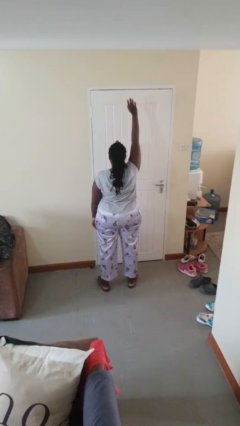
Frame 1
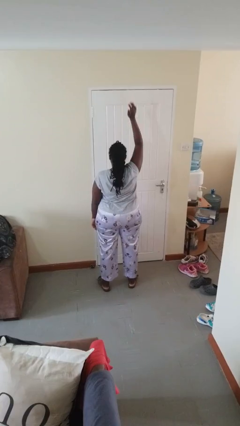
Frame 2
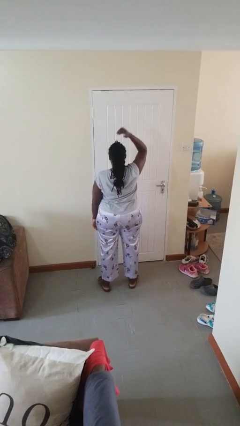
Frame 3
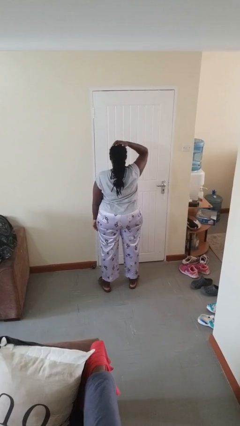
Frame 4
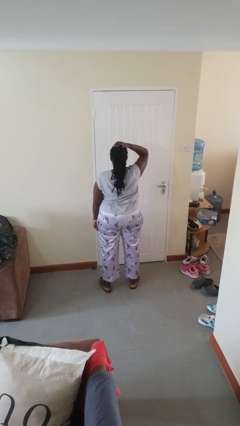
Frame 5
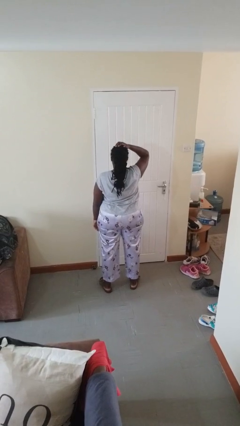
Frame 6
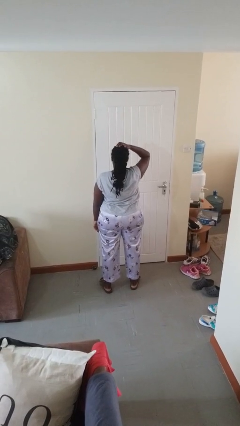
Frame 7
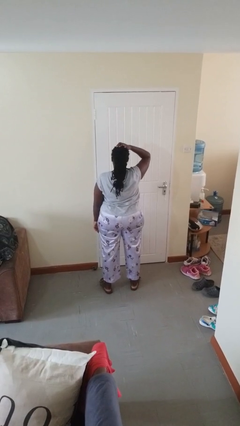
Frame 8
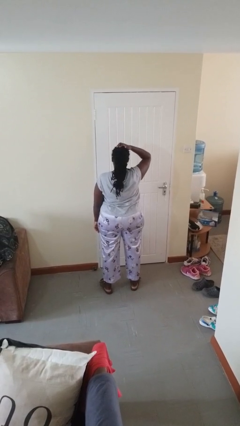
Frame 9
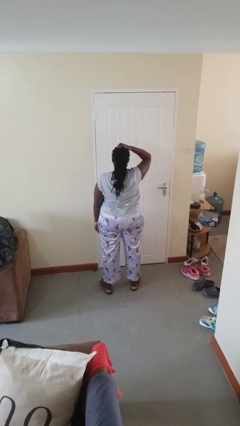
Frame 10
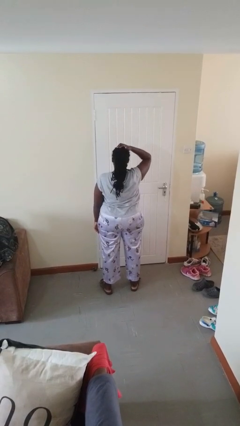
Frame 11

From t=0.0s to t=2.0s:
person gestures lower hand

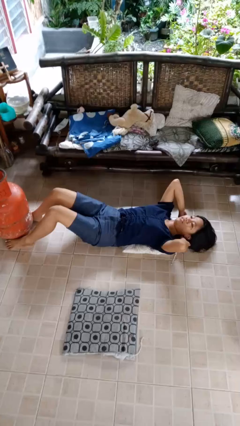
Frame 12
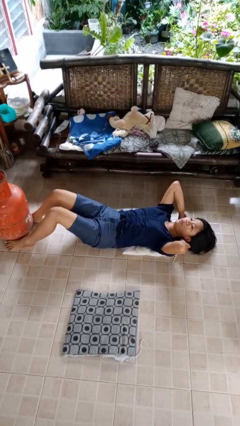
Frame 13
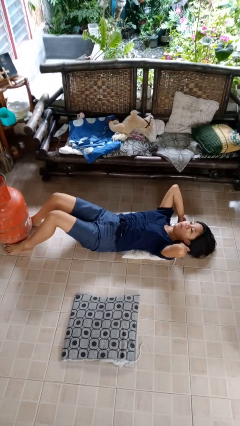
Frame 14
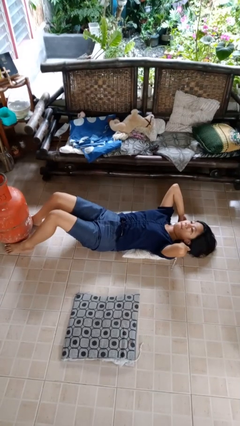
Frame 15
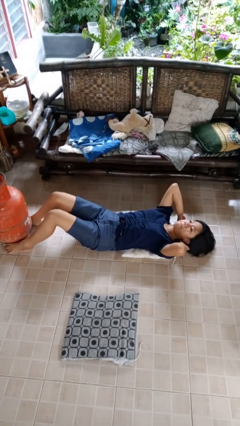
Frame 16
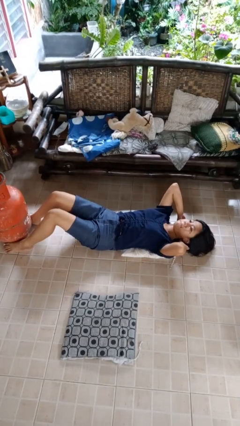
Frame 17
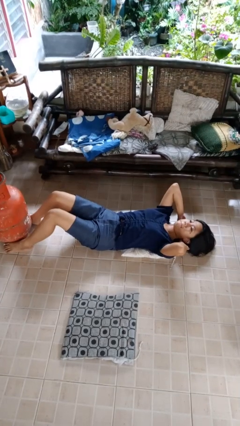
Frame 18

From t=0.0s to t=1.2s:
person exercises with situp

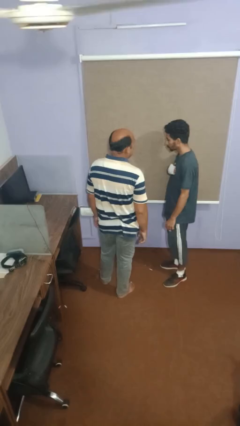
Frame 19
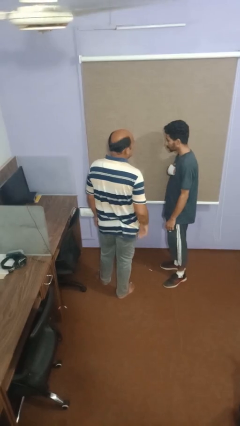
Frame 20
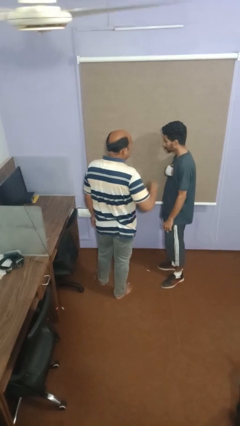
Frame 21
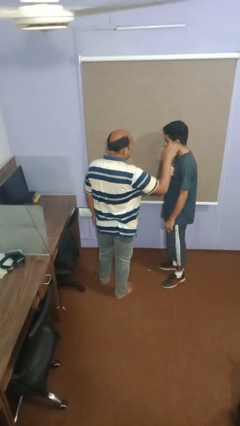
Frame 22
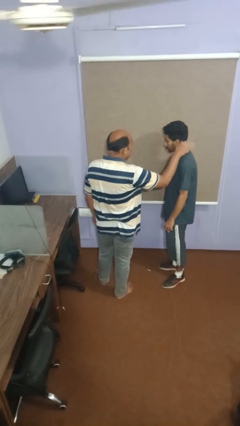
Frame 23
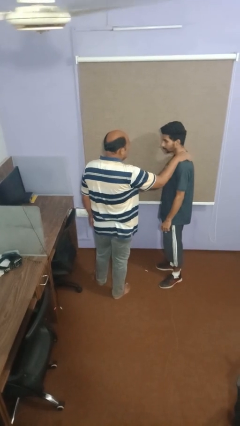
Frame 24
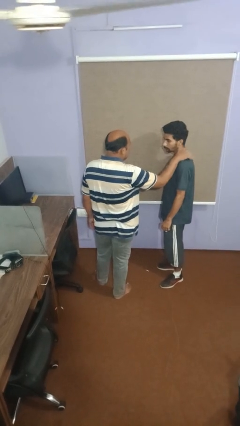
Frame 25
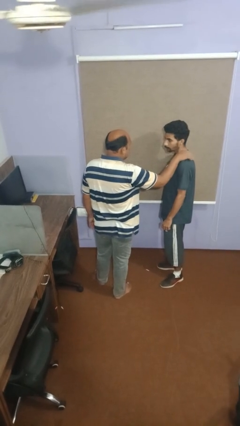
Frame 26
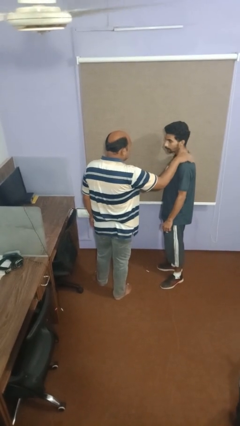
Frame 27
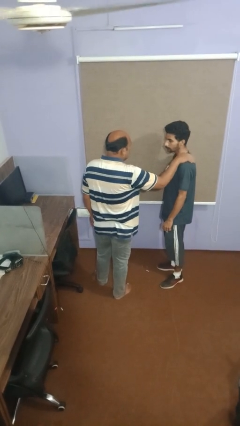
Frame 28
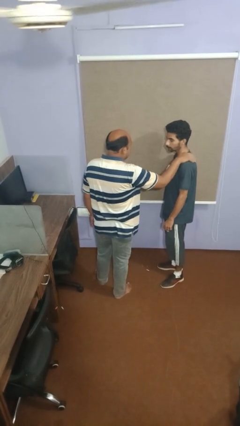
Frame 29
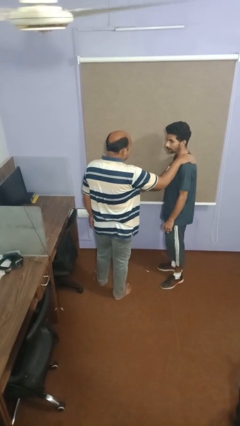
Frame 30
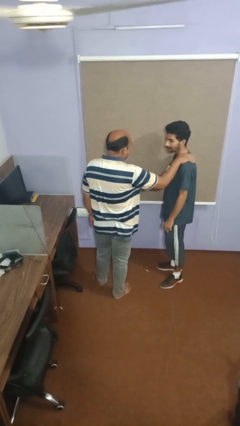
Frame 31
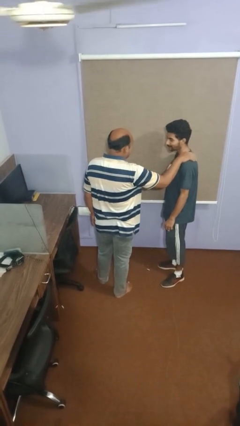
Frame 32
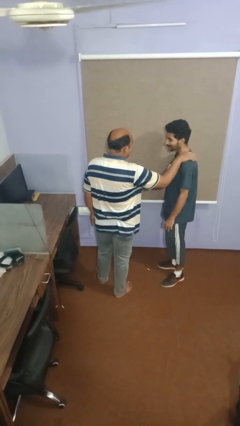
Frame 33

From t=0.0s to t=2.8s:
person pounds shoulders of person

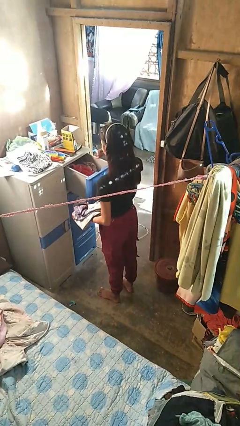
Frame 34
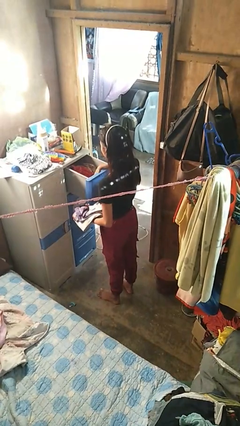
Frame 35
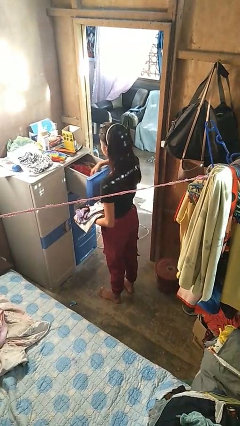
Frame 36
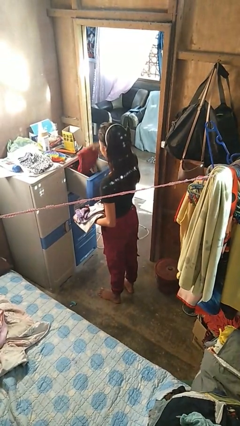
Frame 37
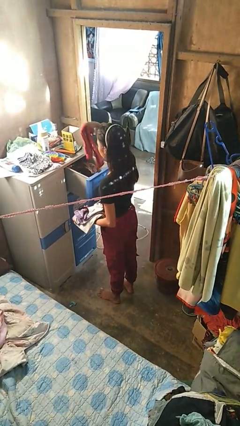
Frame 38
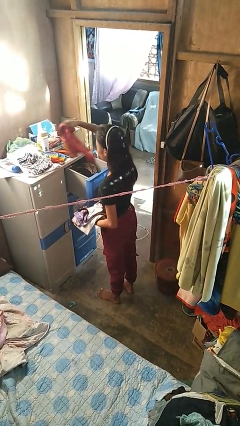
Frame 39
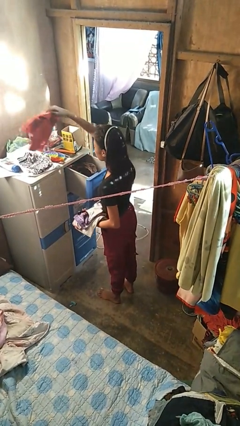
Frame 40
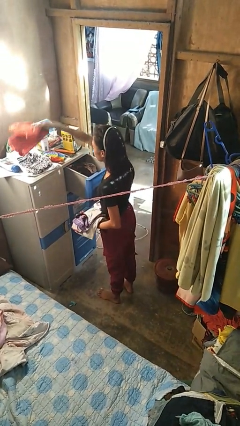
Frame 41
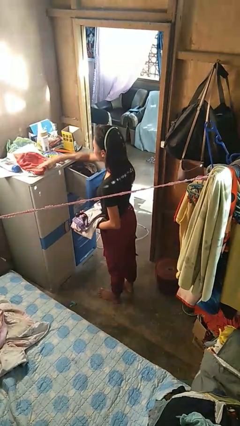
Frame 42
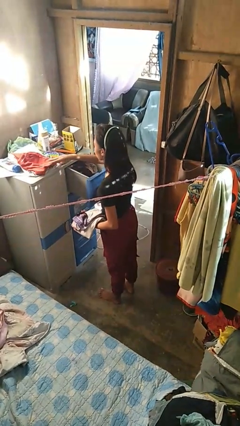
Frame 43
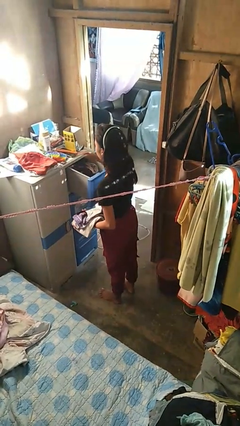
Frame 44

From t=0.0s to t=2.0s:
person takes clothes from dresser

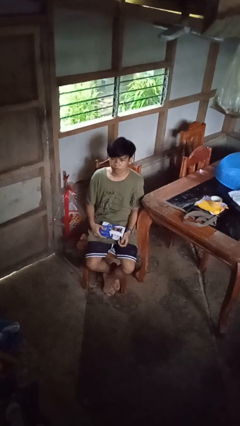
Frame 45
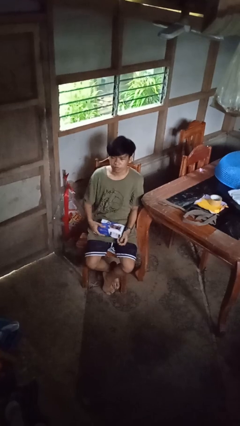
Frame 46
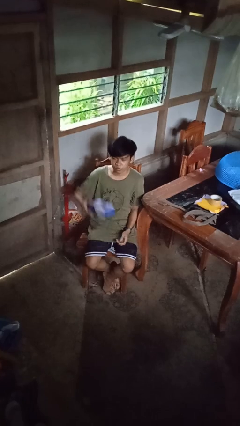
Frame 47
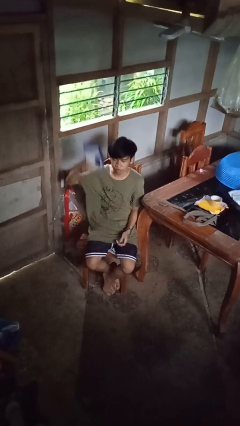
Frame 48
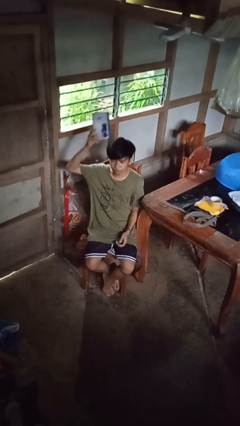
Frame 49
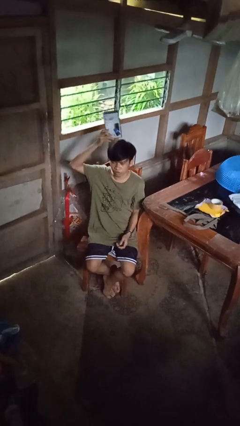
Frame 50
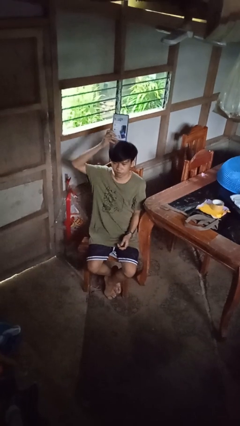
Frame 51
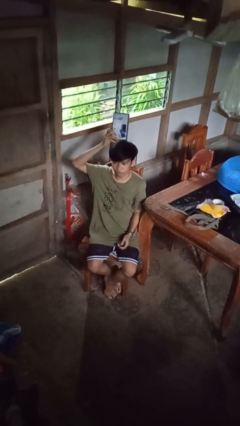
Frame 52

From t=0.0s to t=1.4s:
person holds object above head

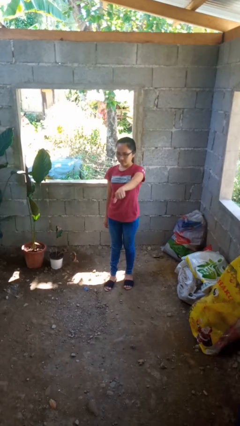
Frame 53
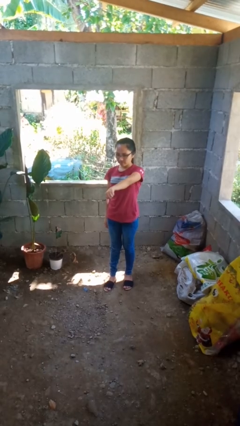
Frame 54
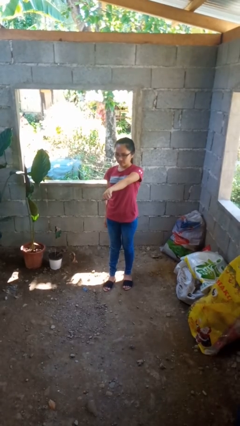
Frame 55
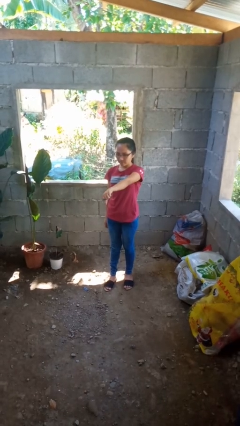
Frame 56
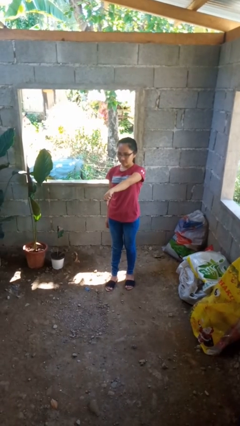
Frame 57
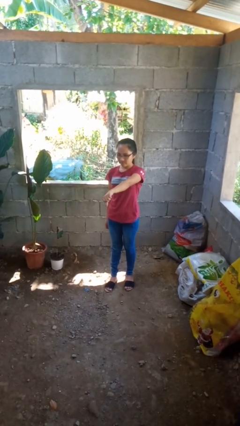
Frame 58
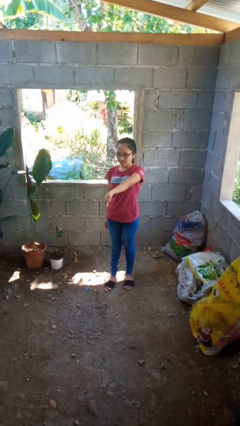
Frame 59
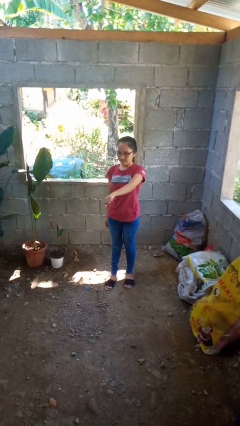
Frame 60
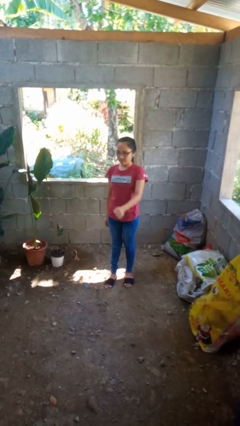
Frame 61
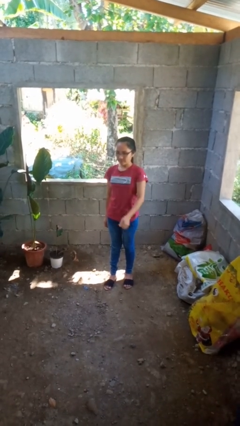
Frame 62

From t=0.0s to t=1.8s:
person gestures thumbs down

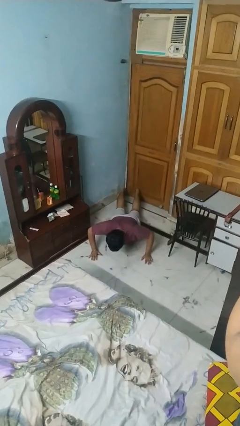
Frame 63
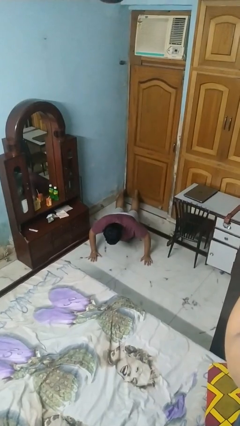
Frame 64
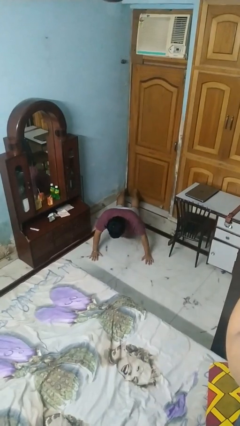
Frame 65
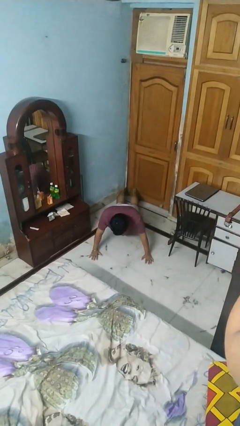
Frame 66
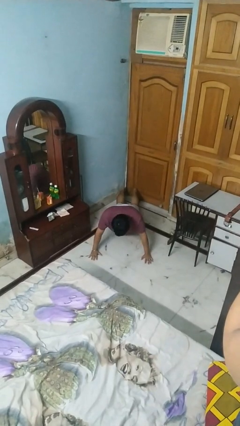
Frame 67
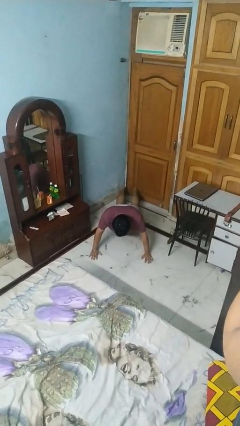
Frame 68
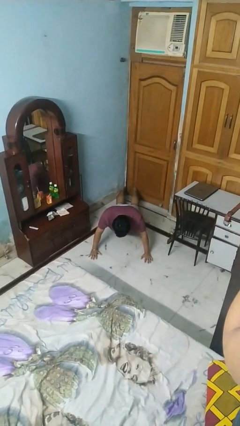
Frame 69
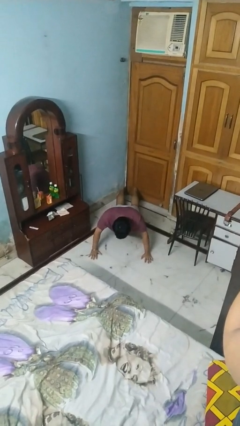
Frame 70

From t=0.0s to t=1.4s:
person exercises with pushup

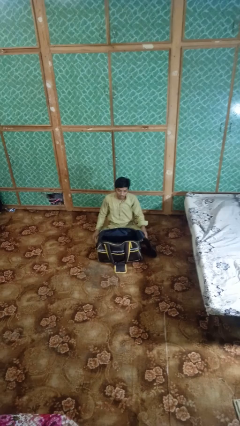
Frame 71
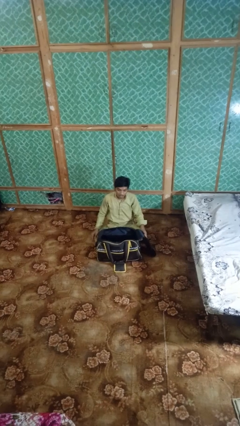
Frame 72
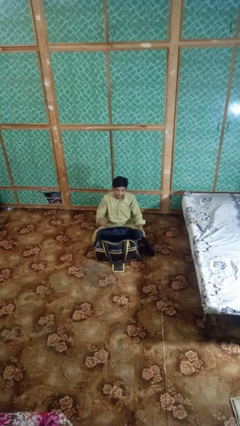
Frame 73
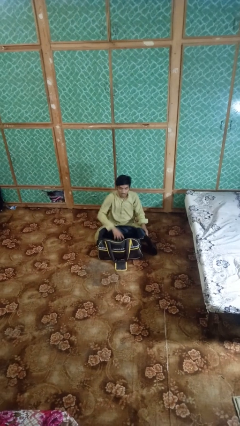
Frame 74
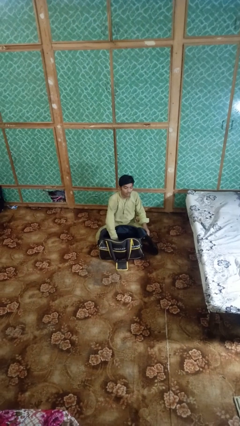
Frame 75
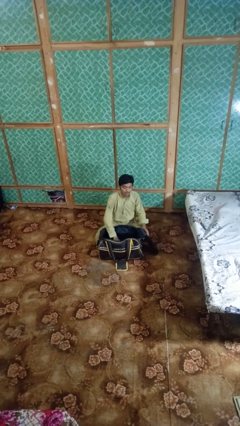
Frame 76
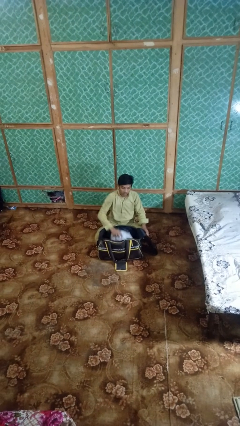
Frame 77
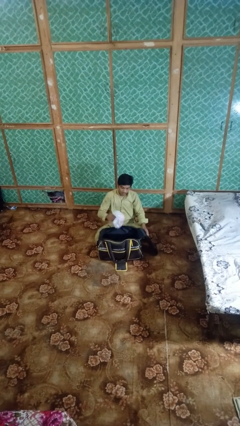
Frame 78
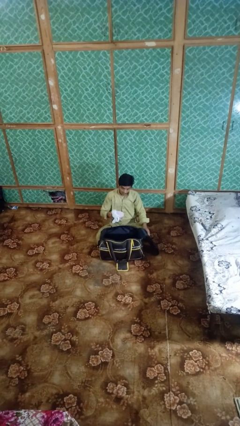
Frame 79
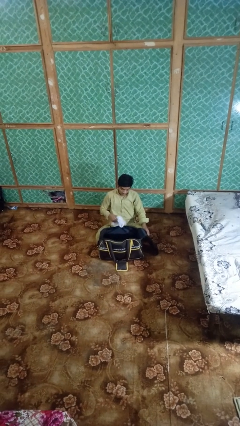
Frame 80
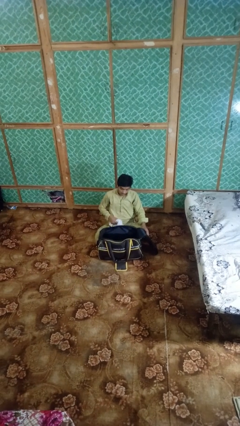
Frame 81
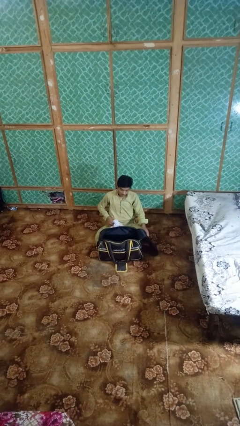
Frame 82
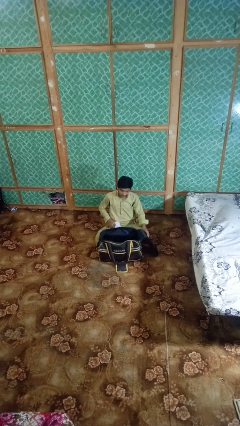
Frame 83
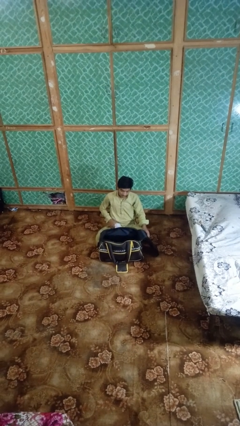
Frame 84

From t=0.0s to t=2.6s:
person takes object from bag

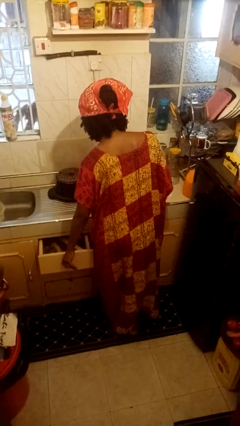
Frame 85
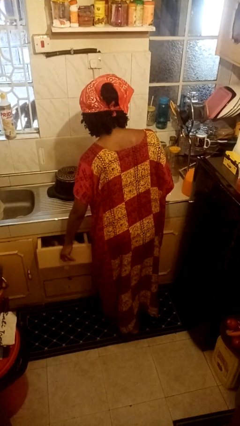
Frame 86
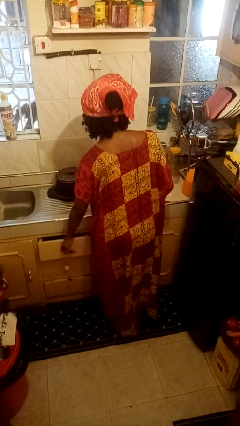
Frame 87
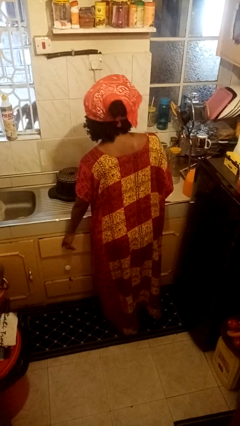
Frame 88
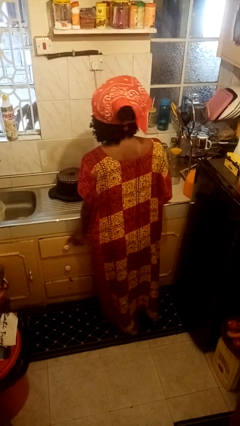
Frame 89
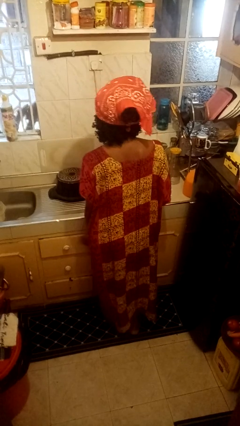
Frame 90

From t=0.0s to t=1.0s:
person closes kitchen drawer

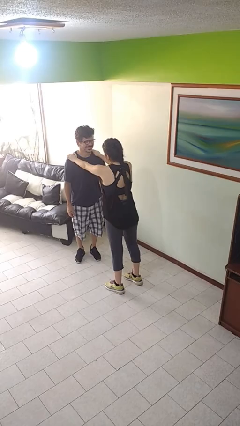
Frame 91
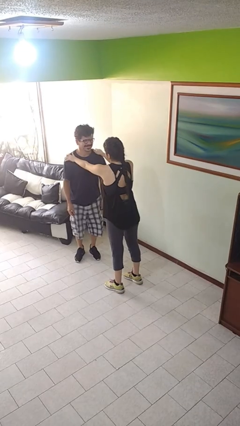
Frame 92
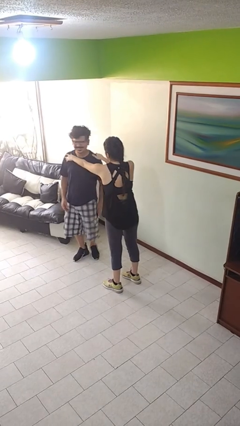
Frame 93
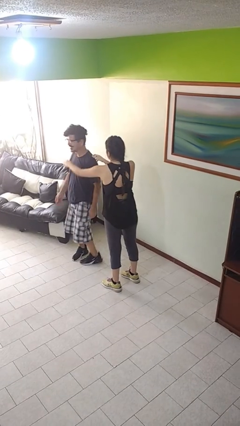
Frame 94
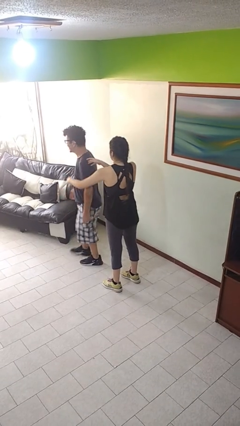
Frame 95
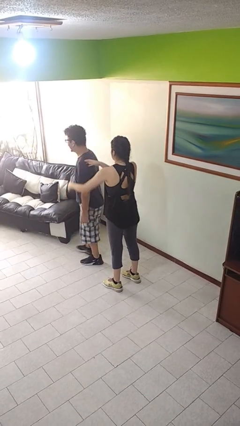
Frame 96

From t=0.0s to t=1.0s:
person spins person around
